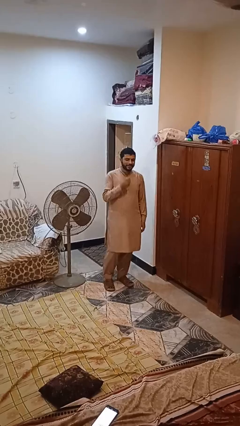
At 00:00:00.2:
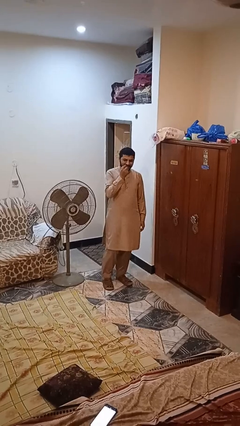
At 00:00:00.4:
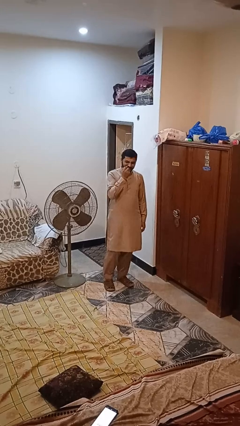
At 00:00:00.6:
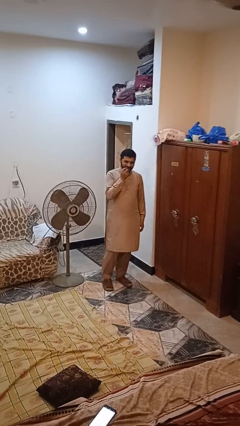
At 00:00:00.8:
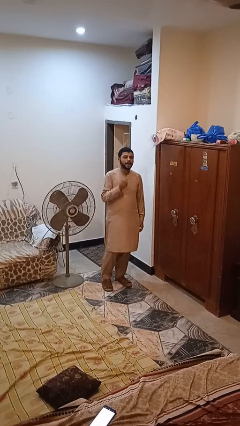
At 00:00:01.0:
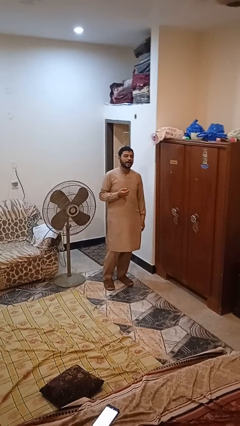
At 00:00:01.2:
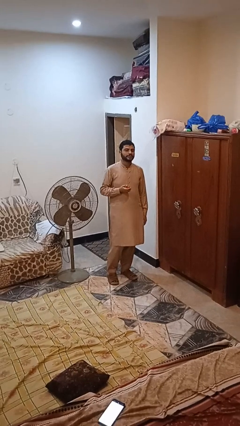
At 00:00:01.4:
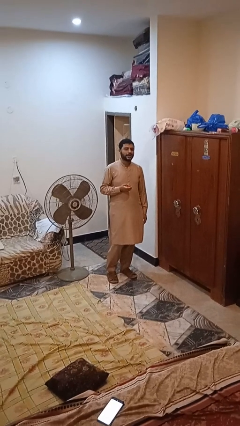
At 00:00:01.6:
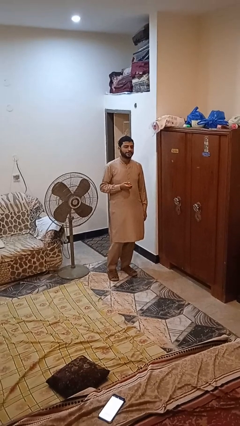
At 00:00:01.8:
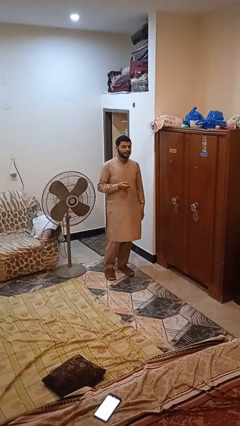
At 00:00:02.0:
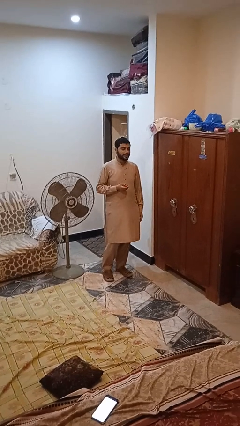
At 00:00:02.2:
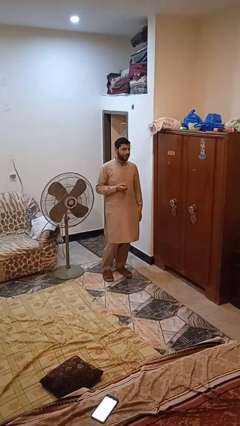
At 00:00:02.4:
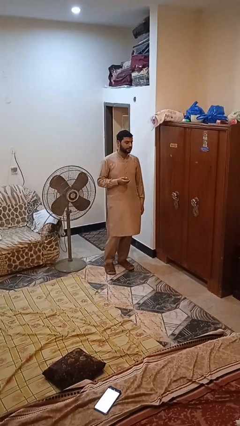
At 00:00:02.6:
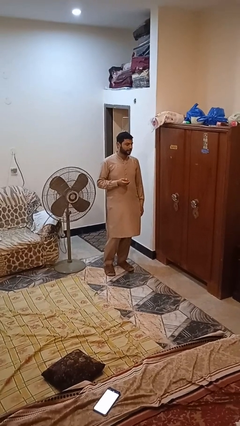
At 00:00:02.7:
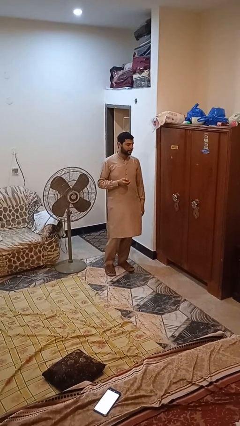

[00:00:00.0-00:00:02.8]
person eats apple

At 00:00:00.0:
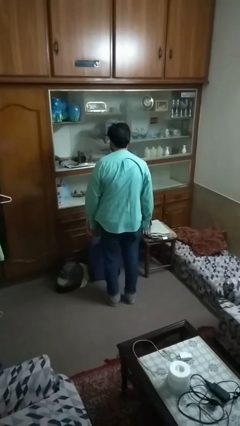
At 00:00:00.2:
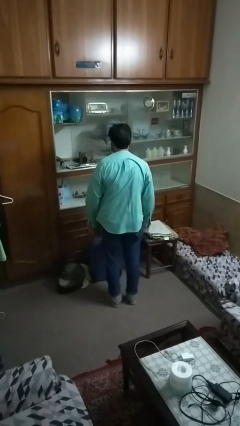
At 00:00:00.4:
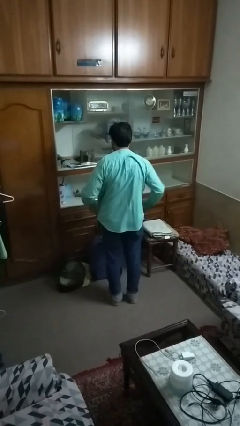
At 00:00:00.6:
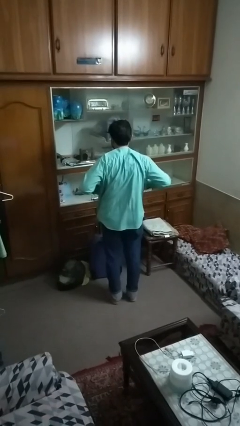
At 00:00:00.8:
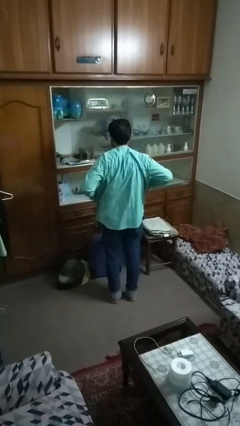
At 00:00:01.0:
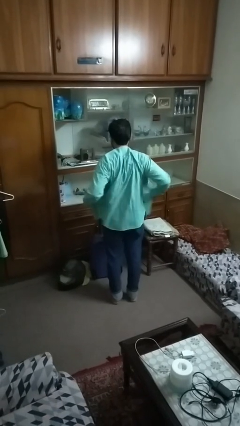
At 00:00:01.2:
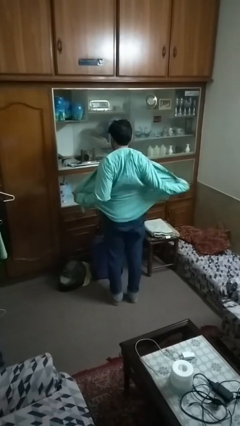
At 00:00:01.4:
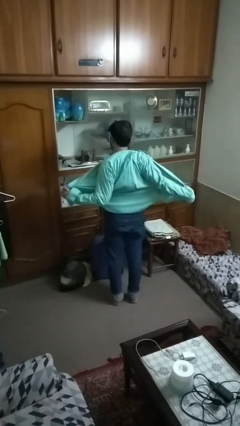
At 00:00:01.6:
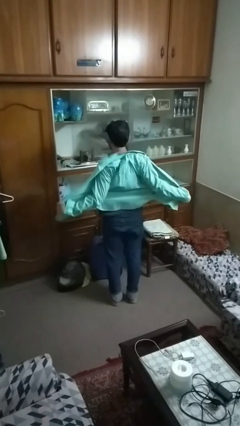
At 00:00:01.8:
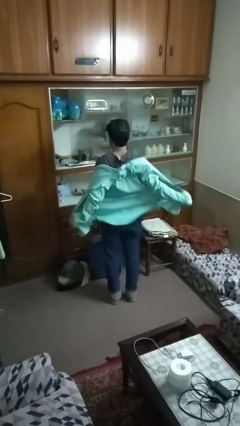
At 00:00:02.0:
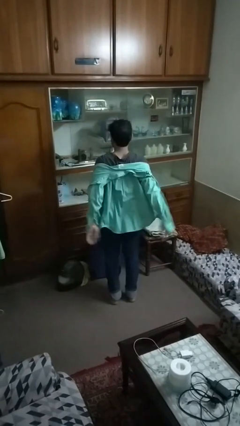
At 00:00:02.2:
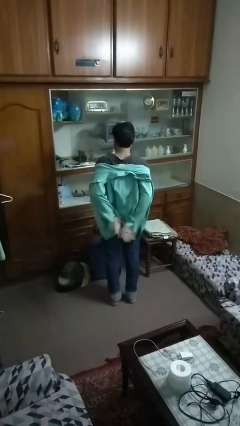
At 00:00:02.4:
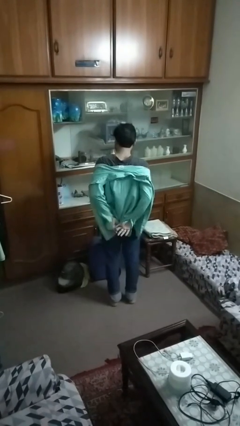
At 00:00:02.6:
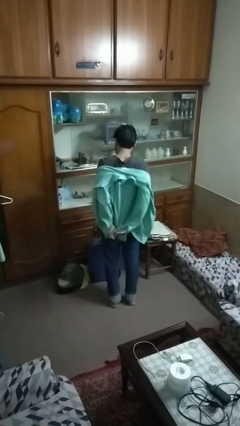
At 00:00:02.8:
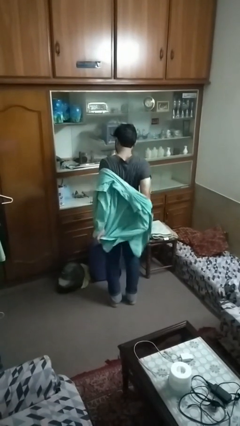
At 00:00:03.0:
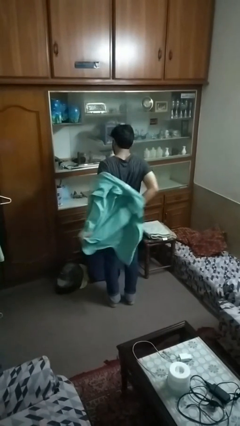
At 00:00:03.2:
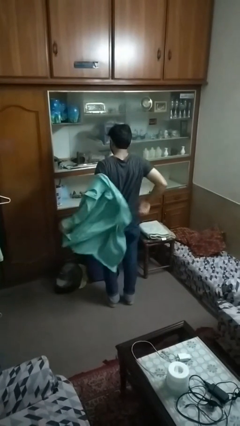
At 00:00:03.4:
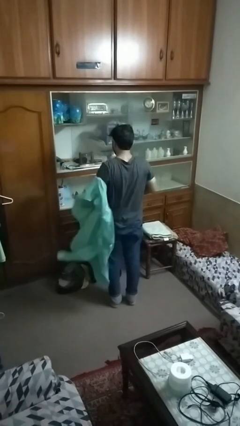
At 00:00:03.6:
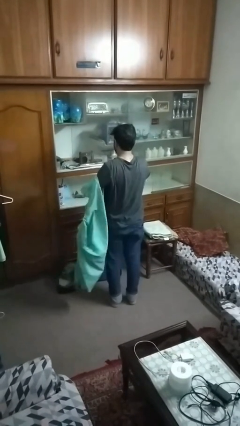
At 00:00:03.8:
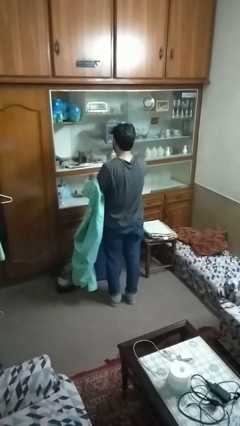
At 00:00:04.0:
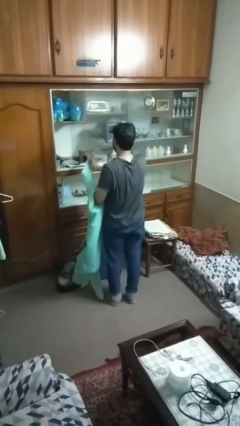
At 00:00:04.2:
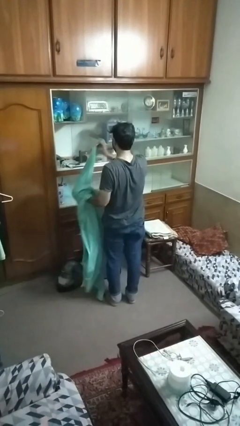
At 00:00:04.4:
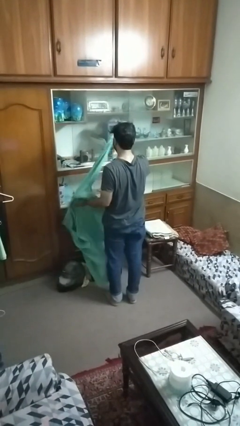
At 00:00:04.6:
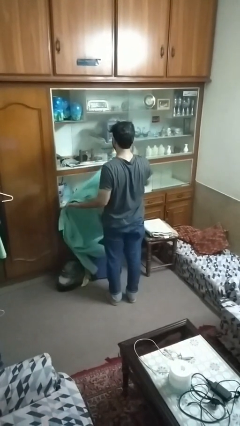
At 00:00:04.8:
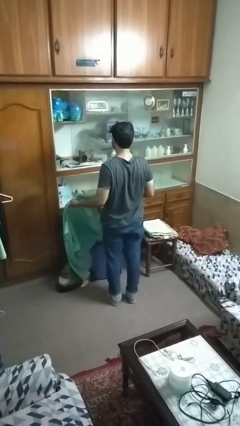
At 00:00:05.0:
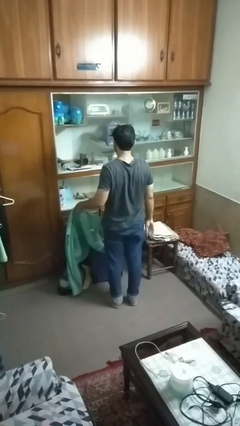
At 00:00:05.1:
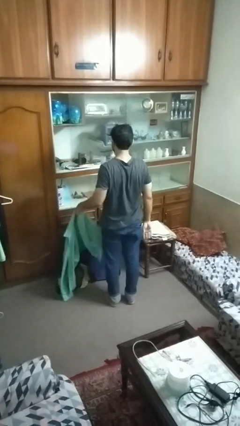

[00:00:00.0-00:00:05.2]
person takes off shirt

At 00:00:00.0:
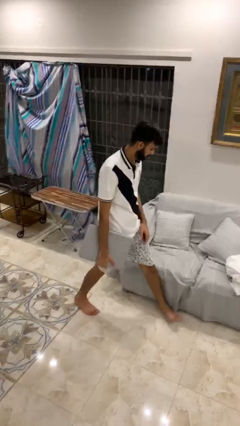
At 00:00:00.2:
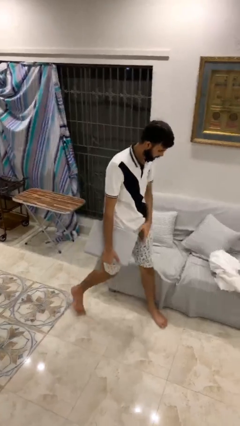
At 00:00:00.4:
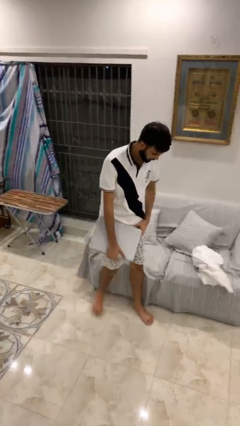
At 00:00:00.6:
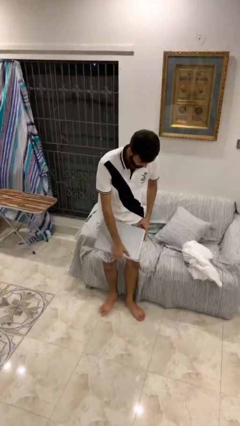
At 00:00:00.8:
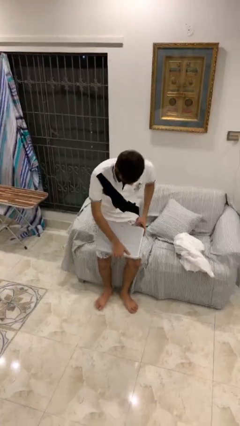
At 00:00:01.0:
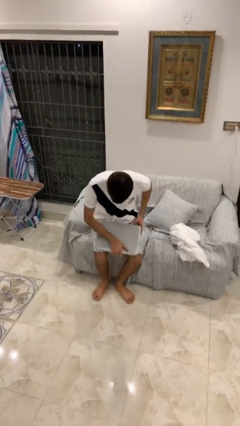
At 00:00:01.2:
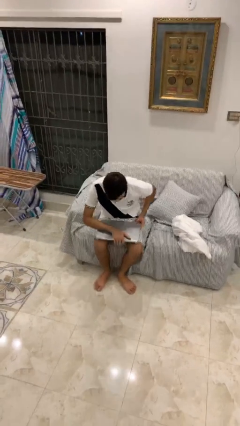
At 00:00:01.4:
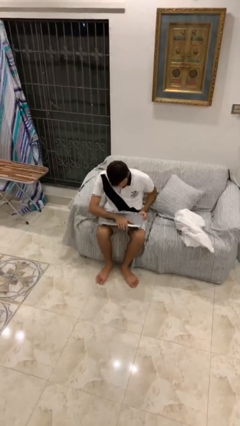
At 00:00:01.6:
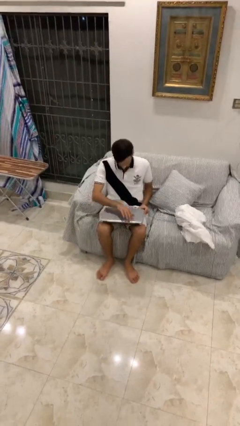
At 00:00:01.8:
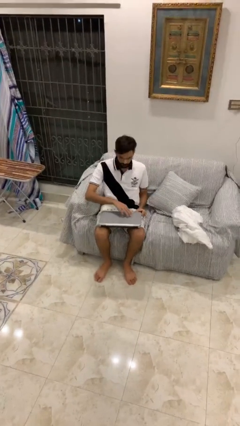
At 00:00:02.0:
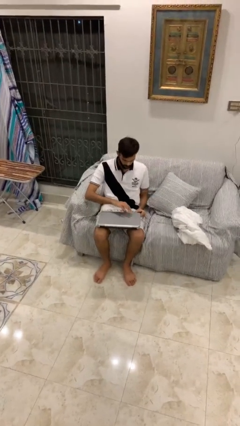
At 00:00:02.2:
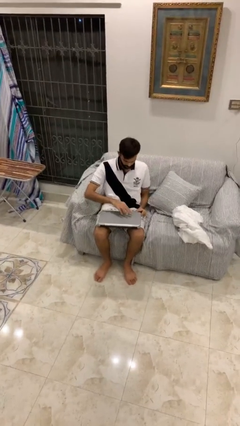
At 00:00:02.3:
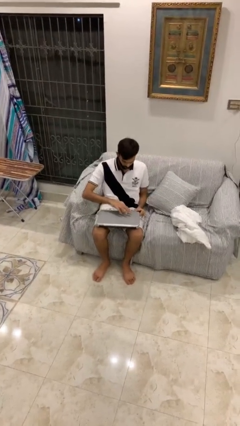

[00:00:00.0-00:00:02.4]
person sits down

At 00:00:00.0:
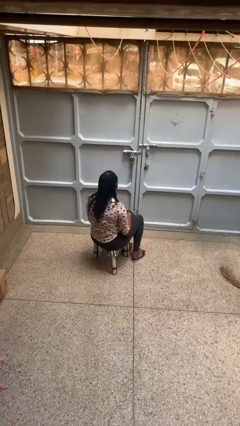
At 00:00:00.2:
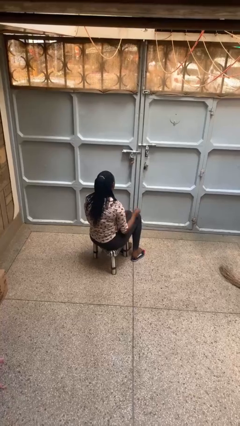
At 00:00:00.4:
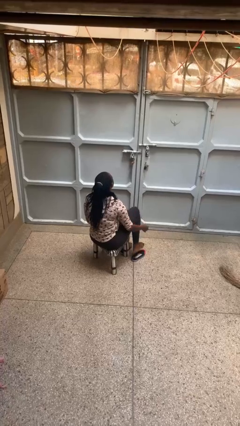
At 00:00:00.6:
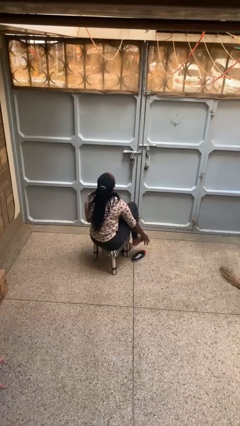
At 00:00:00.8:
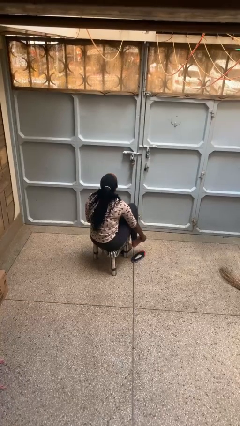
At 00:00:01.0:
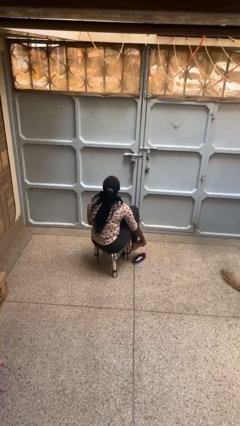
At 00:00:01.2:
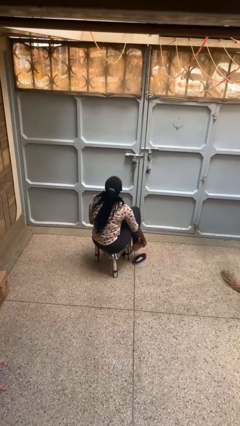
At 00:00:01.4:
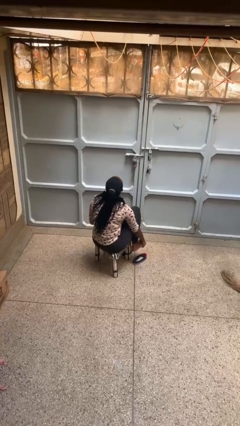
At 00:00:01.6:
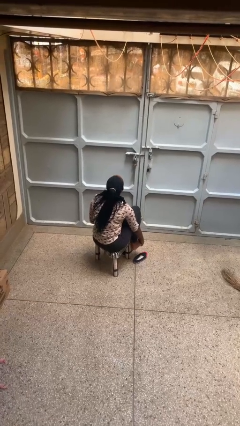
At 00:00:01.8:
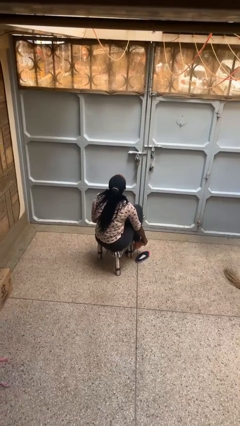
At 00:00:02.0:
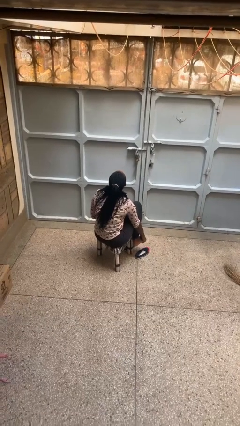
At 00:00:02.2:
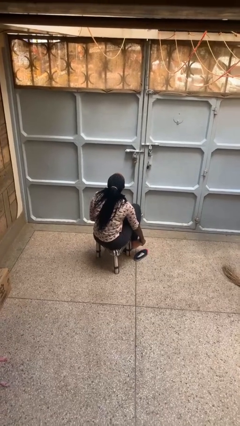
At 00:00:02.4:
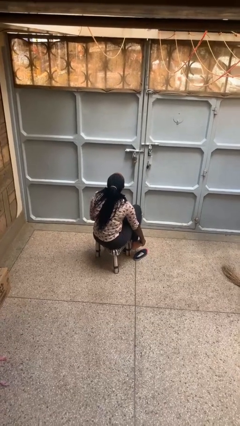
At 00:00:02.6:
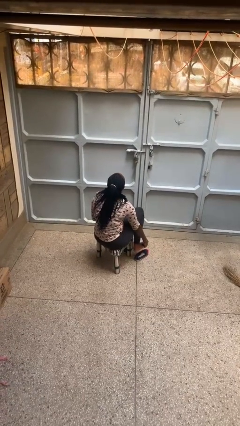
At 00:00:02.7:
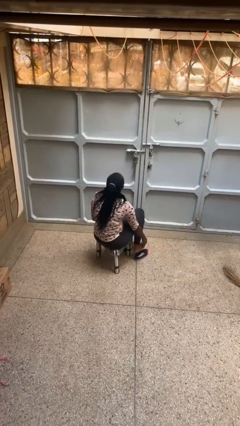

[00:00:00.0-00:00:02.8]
person rubs foot

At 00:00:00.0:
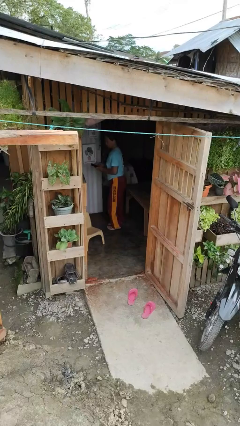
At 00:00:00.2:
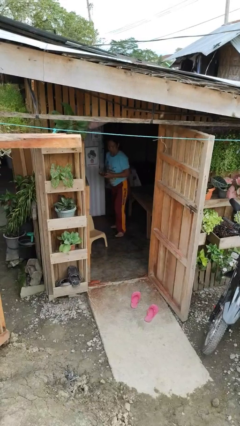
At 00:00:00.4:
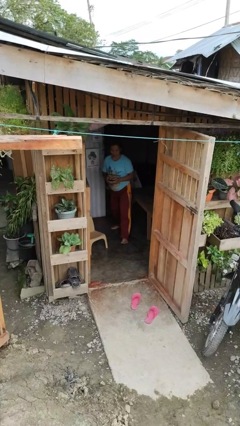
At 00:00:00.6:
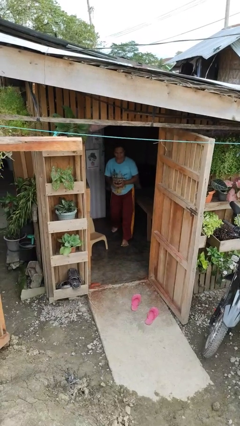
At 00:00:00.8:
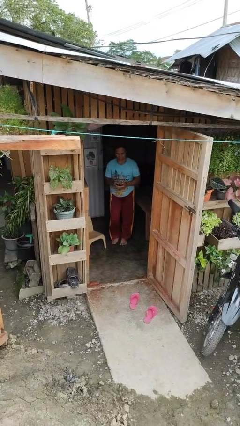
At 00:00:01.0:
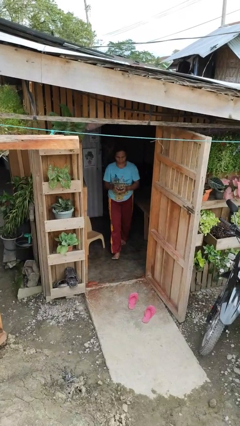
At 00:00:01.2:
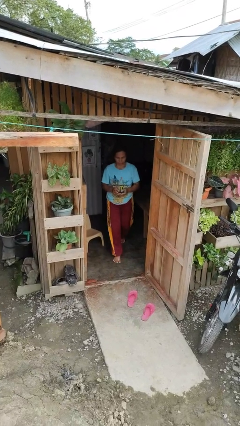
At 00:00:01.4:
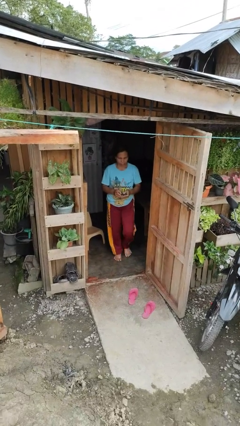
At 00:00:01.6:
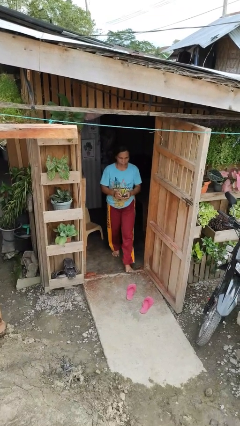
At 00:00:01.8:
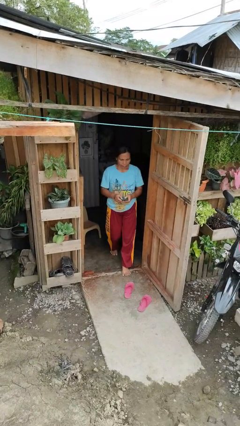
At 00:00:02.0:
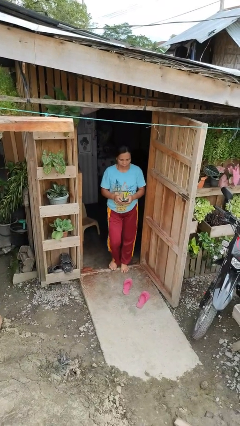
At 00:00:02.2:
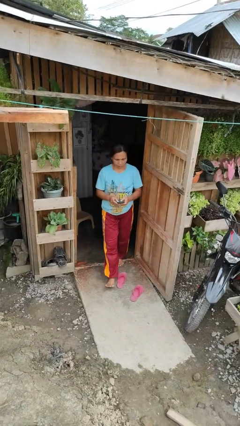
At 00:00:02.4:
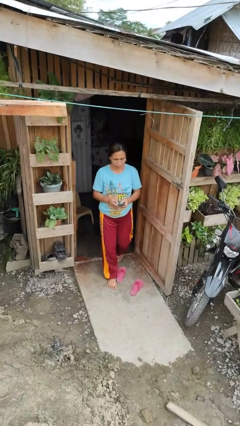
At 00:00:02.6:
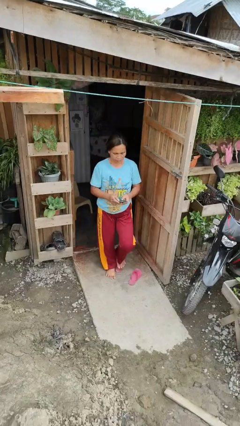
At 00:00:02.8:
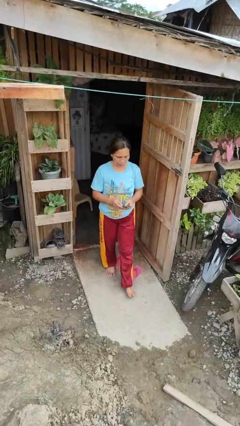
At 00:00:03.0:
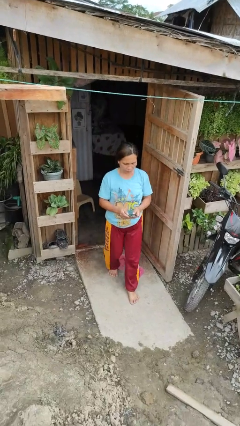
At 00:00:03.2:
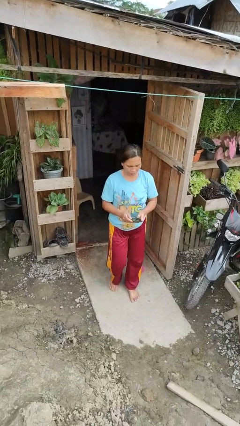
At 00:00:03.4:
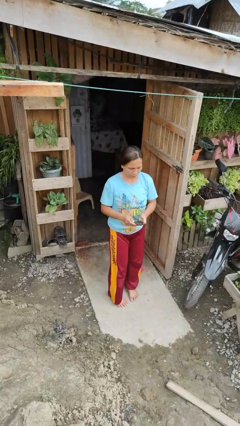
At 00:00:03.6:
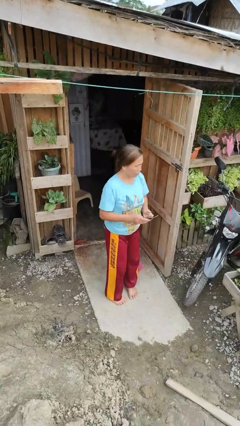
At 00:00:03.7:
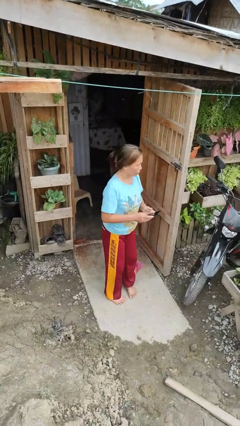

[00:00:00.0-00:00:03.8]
person enters scene through structure

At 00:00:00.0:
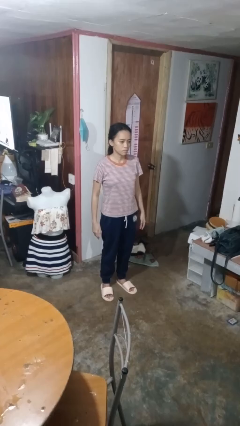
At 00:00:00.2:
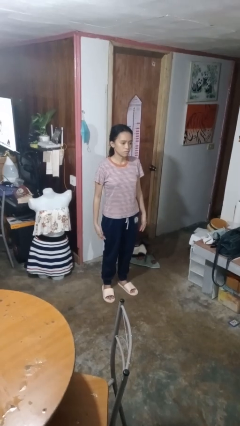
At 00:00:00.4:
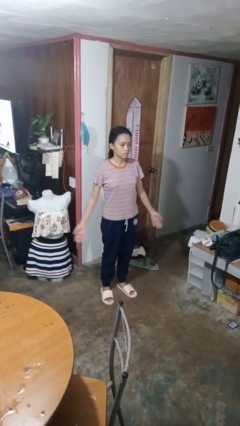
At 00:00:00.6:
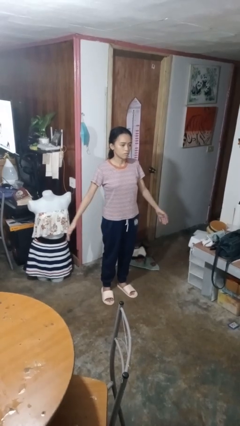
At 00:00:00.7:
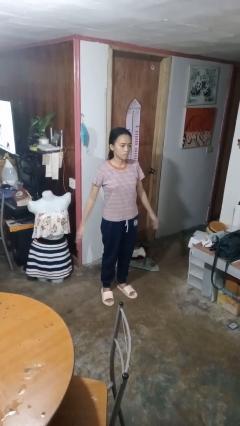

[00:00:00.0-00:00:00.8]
person slaps hands on thighs
